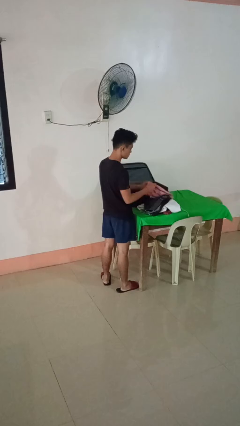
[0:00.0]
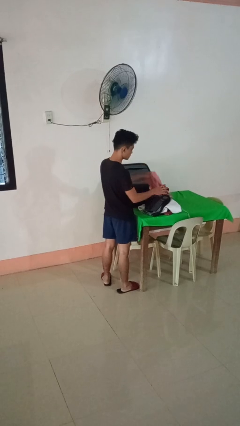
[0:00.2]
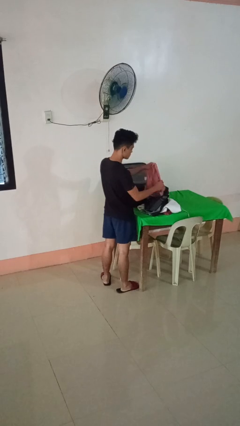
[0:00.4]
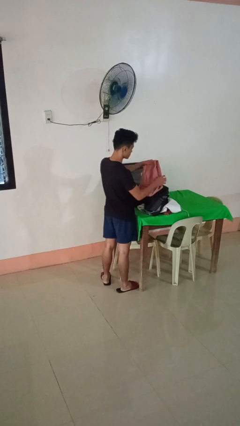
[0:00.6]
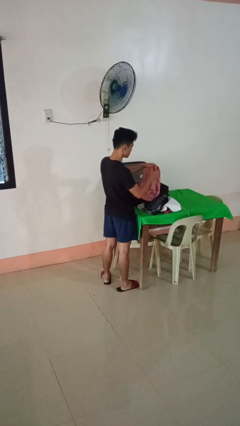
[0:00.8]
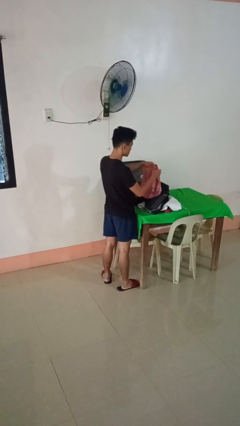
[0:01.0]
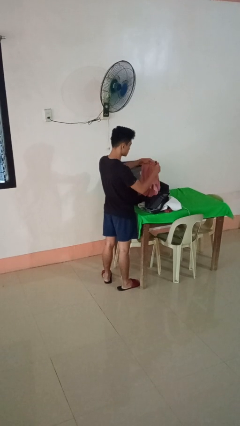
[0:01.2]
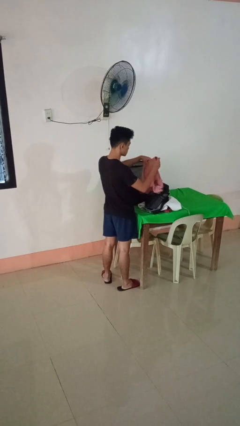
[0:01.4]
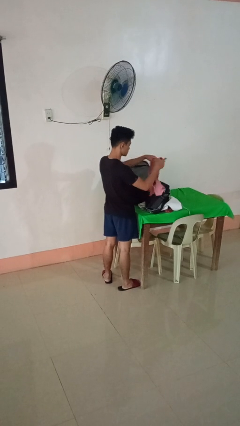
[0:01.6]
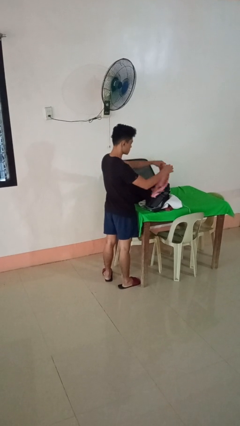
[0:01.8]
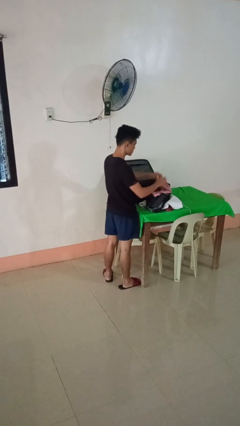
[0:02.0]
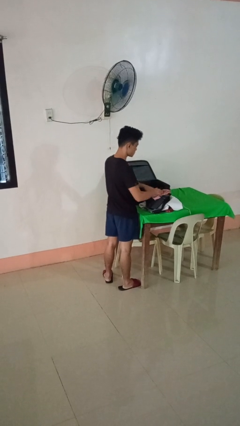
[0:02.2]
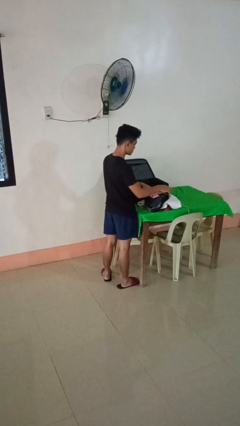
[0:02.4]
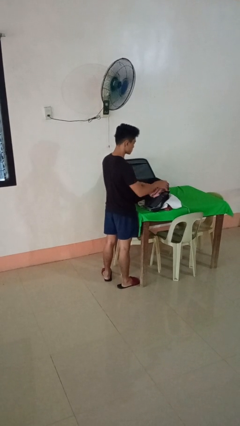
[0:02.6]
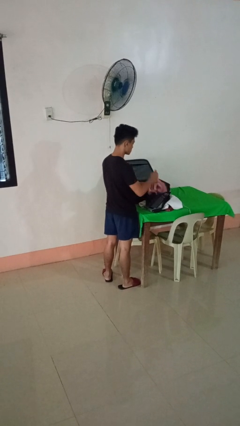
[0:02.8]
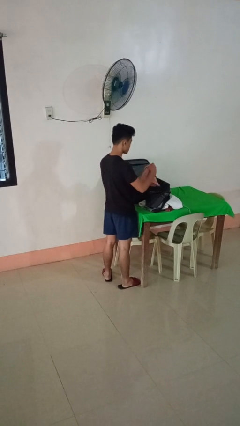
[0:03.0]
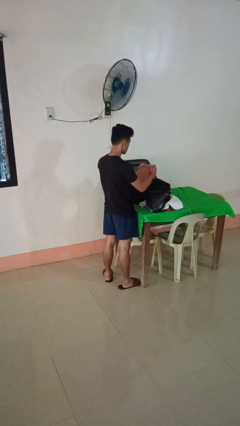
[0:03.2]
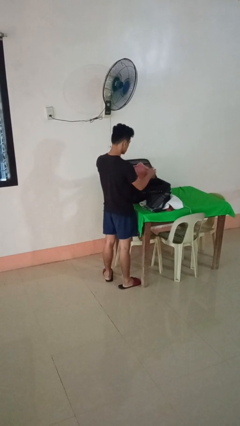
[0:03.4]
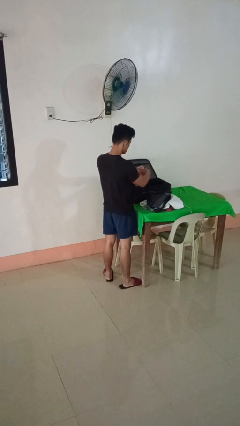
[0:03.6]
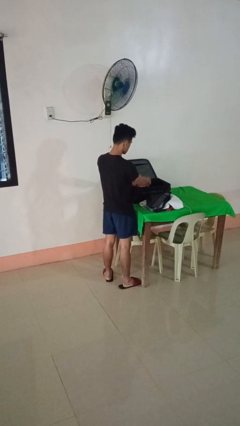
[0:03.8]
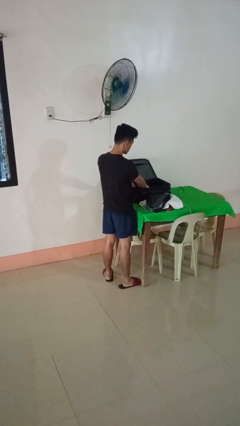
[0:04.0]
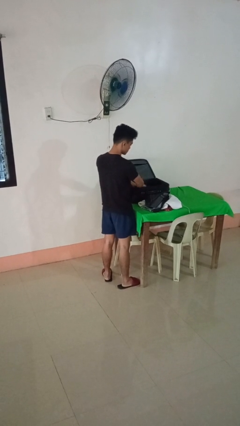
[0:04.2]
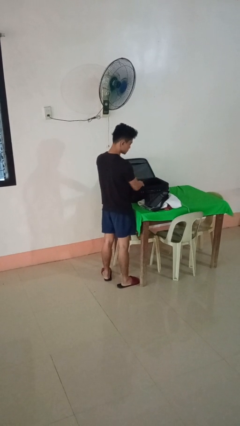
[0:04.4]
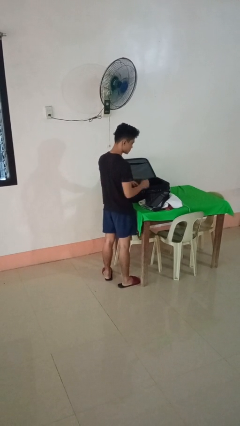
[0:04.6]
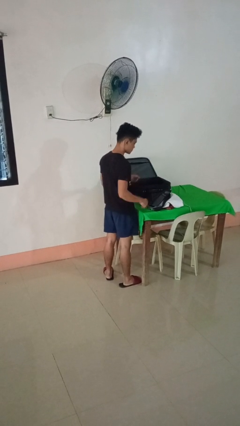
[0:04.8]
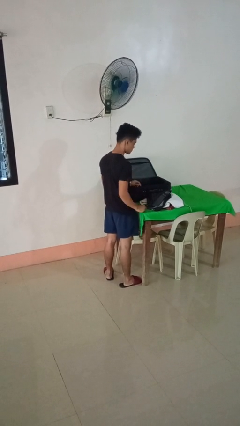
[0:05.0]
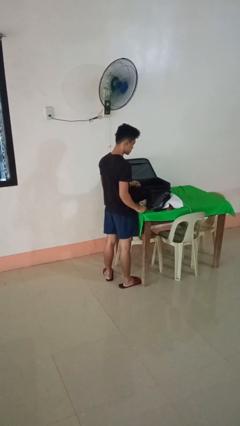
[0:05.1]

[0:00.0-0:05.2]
person loads clothes into suitcase

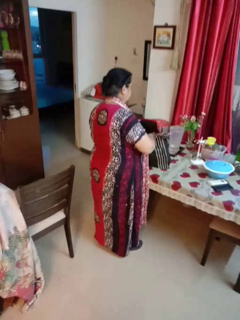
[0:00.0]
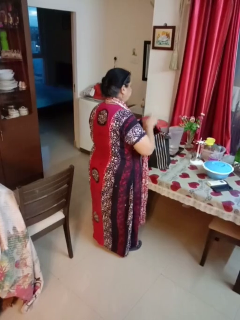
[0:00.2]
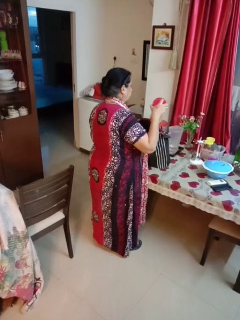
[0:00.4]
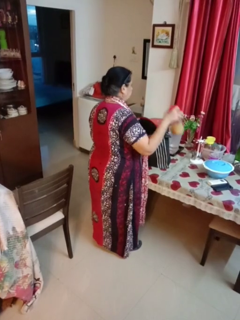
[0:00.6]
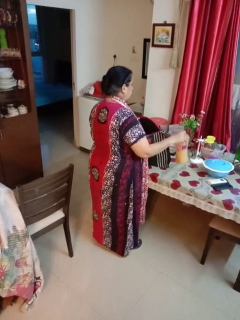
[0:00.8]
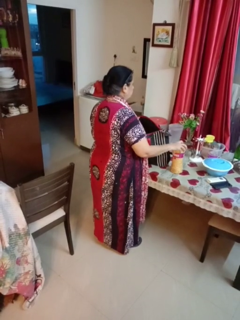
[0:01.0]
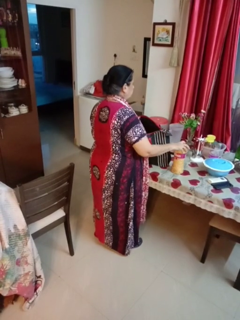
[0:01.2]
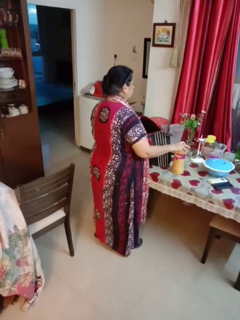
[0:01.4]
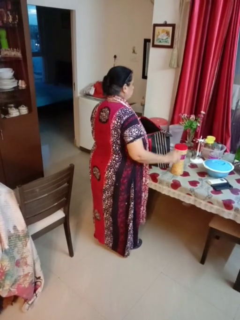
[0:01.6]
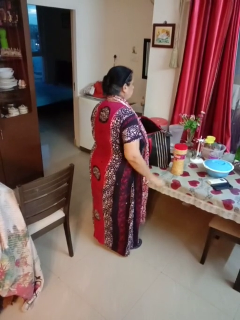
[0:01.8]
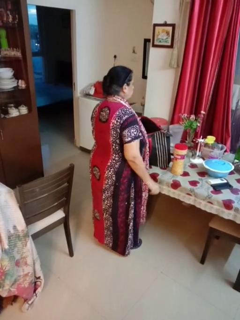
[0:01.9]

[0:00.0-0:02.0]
person takes object from bag

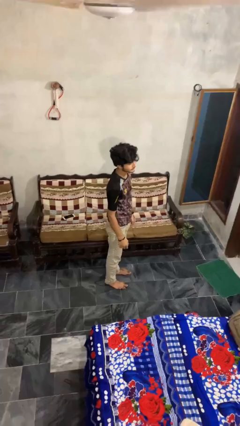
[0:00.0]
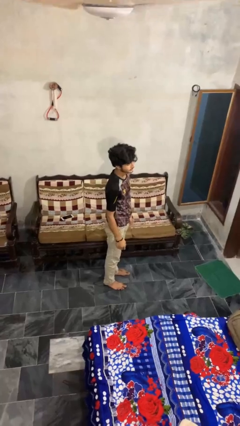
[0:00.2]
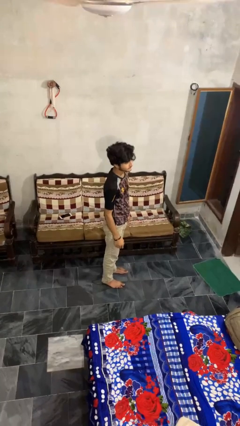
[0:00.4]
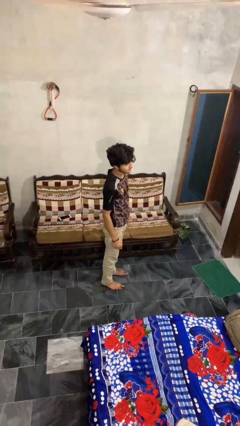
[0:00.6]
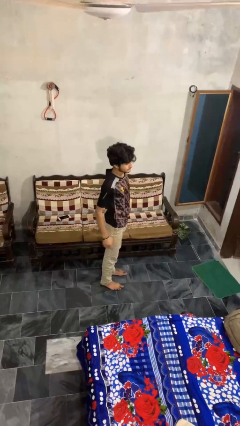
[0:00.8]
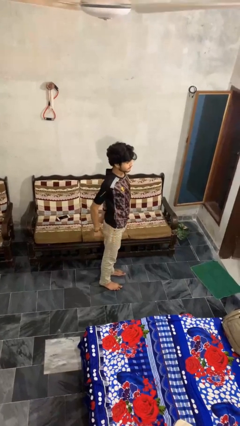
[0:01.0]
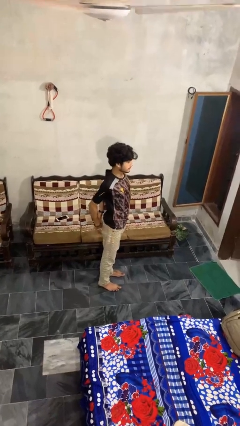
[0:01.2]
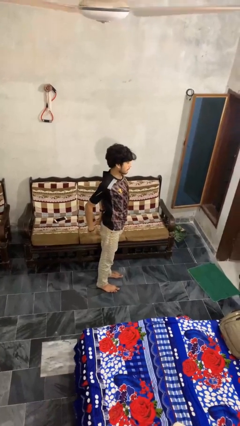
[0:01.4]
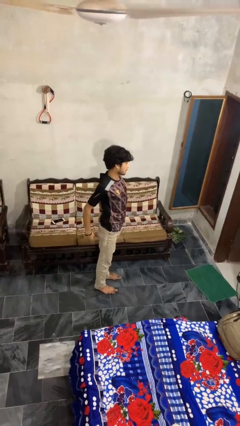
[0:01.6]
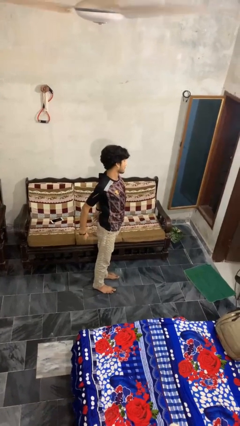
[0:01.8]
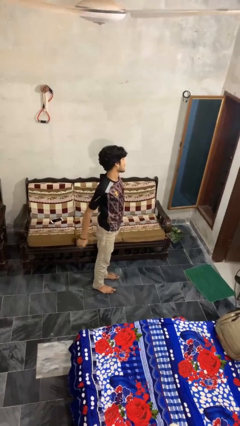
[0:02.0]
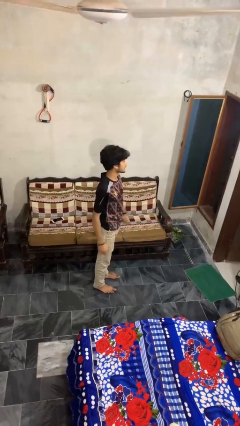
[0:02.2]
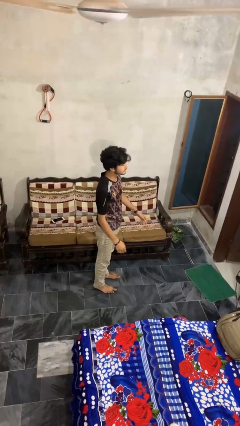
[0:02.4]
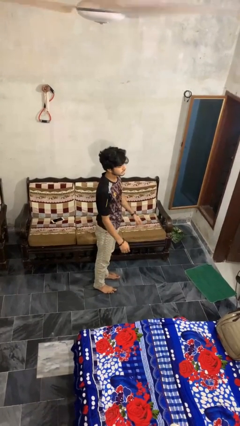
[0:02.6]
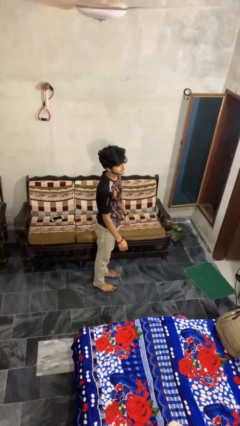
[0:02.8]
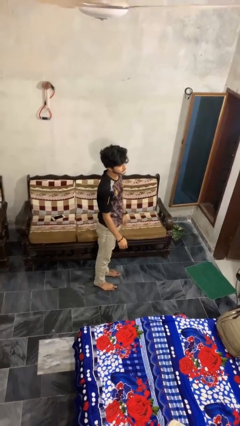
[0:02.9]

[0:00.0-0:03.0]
person stretches back

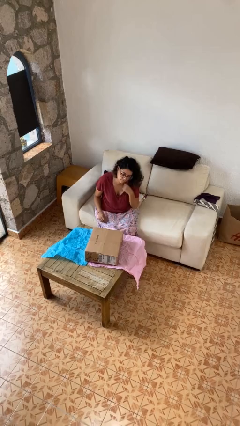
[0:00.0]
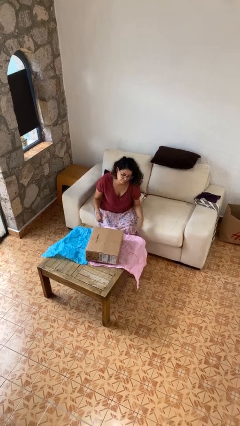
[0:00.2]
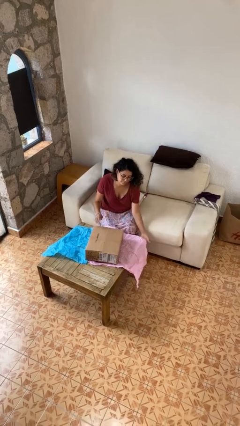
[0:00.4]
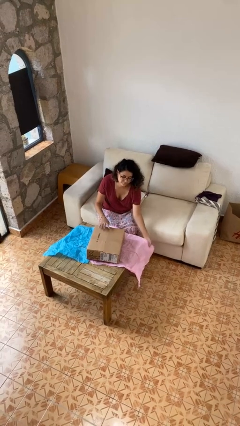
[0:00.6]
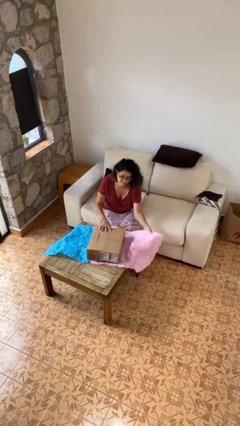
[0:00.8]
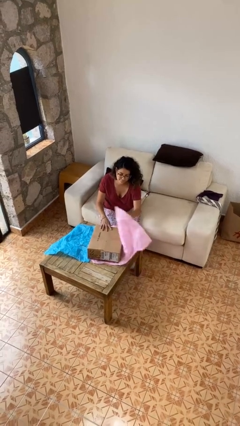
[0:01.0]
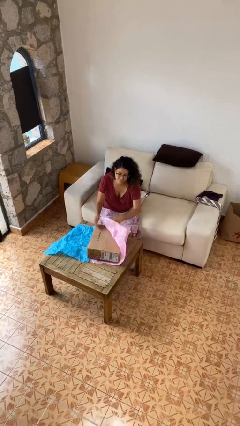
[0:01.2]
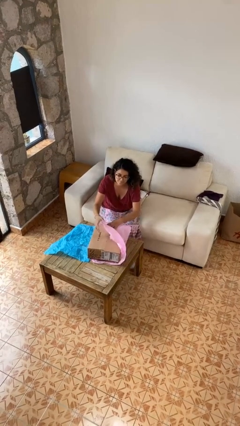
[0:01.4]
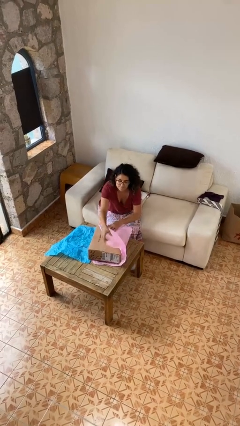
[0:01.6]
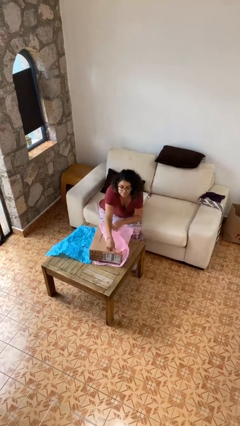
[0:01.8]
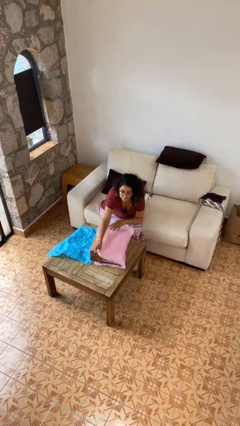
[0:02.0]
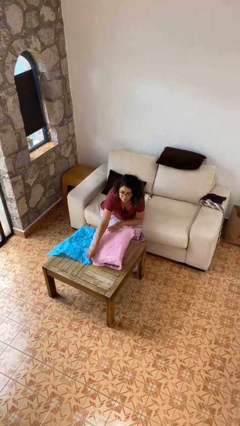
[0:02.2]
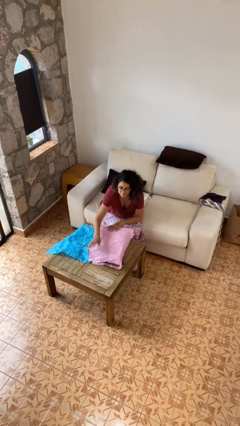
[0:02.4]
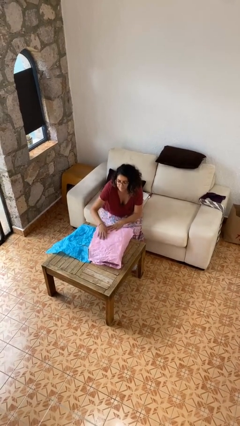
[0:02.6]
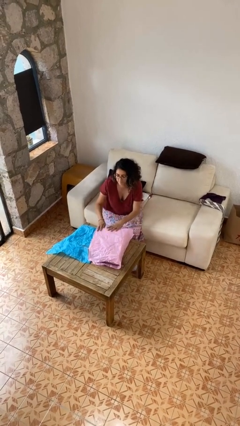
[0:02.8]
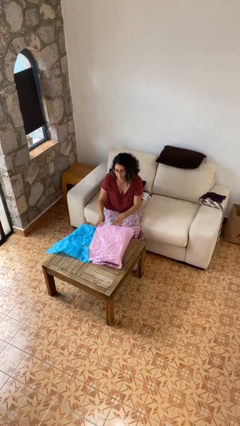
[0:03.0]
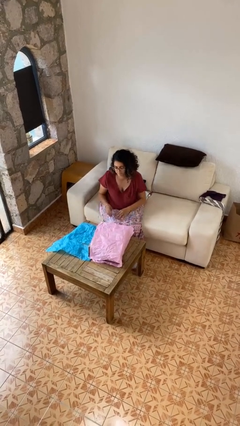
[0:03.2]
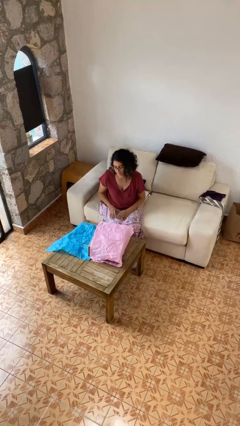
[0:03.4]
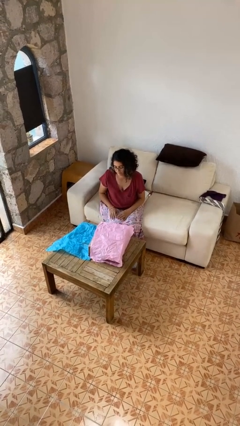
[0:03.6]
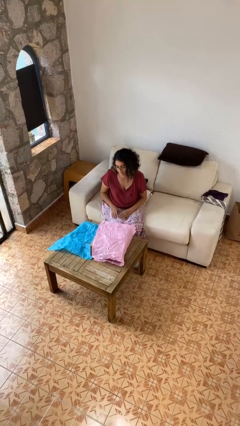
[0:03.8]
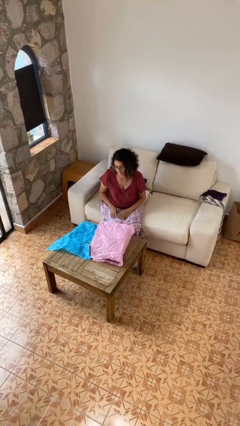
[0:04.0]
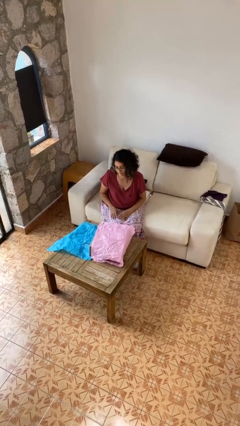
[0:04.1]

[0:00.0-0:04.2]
person wraps box

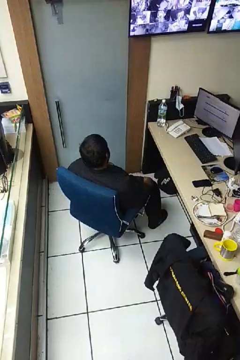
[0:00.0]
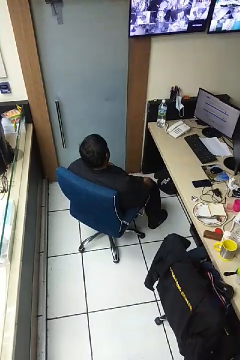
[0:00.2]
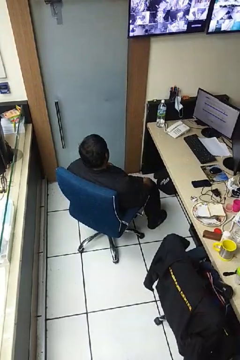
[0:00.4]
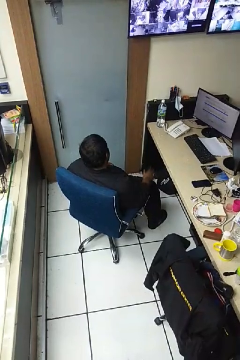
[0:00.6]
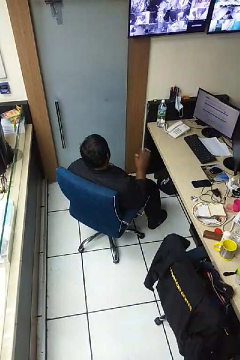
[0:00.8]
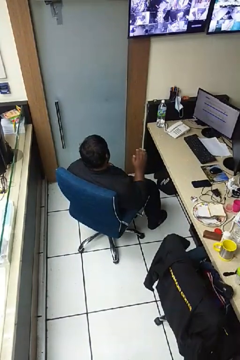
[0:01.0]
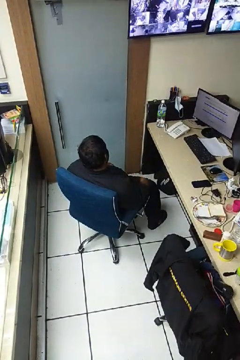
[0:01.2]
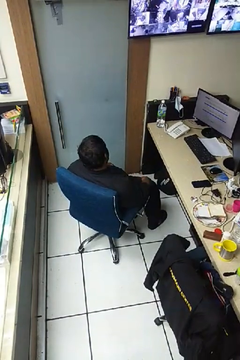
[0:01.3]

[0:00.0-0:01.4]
person slaps hands on thighs

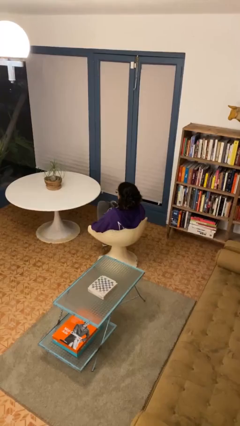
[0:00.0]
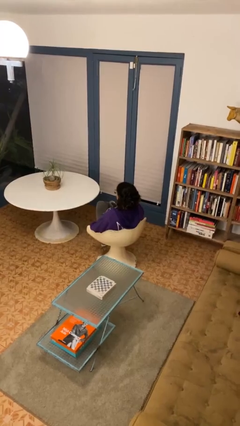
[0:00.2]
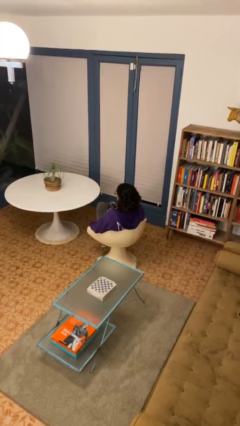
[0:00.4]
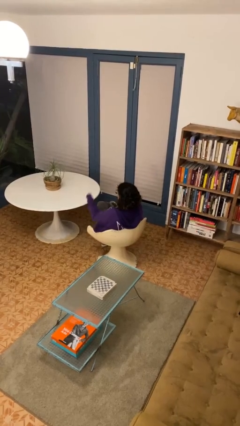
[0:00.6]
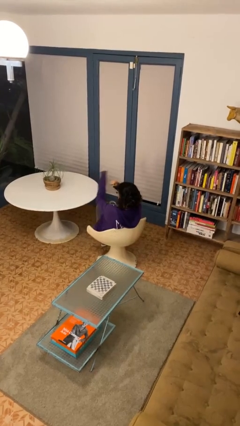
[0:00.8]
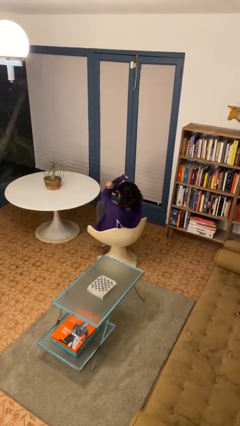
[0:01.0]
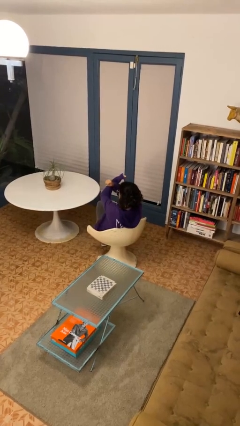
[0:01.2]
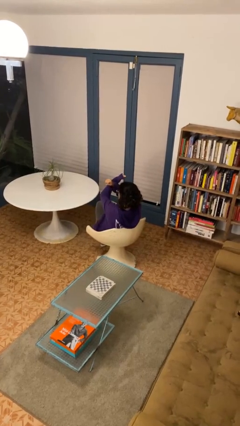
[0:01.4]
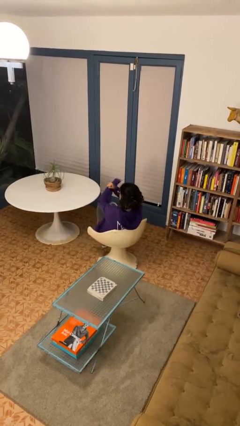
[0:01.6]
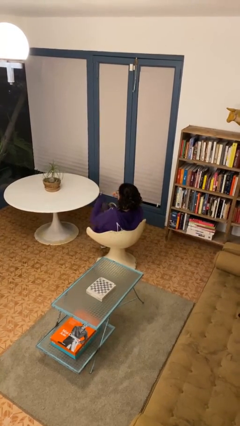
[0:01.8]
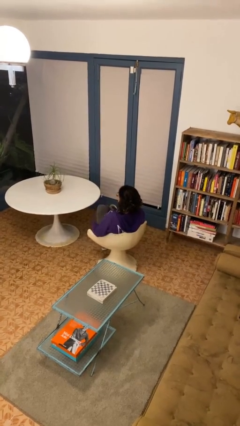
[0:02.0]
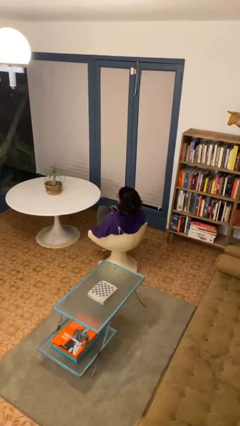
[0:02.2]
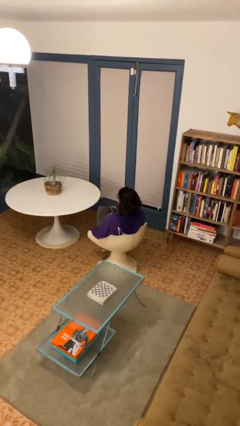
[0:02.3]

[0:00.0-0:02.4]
person gestures arms x
